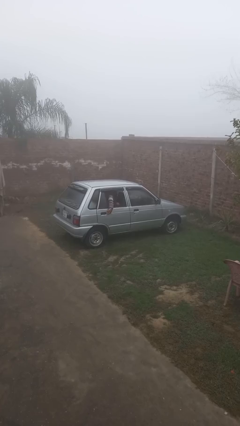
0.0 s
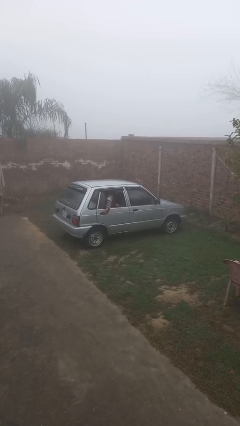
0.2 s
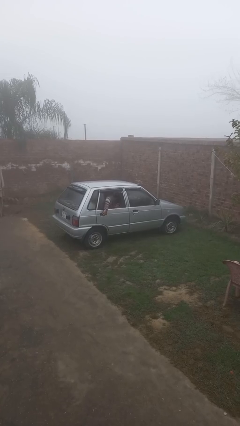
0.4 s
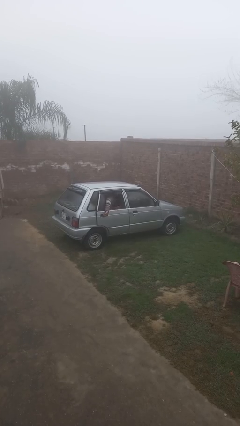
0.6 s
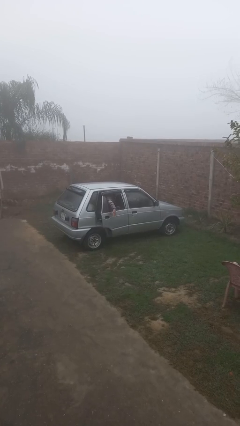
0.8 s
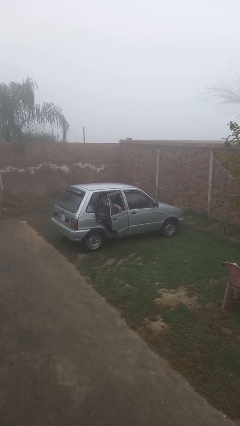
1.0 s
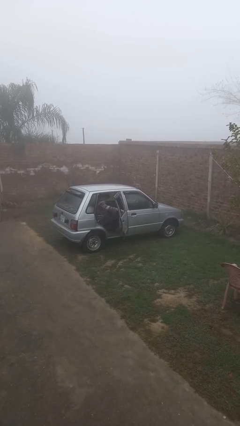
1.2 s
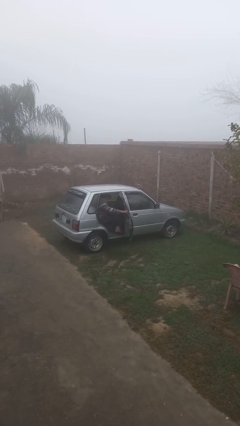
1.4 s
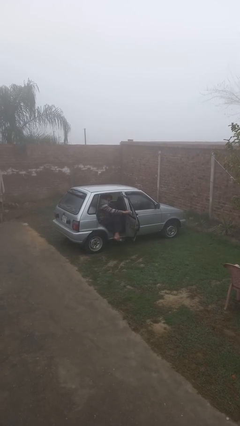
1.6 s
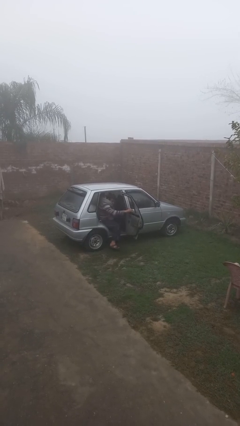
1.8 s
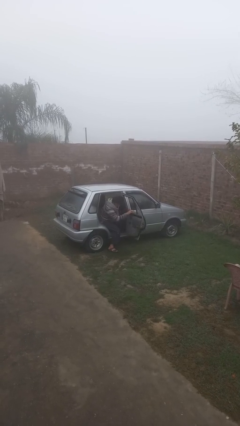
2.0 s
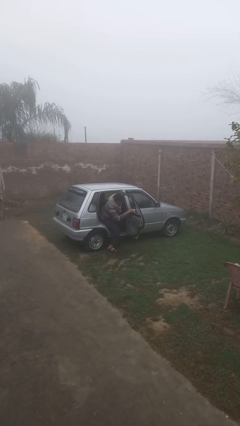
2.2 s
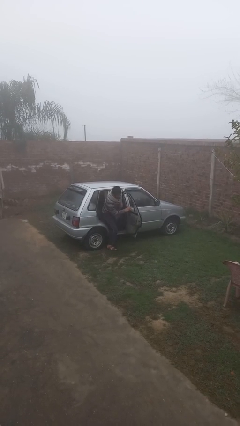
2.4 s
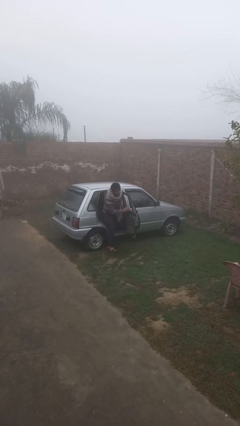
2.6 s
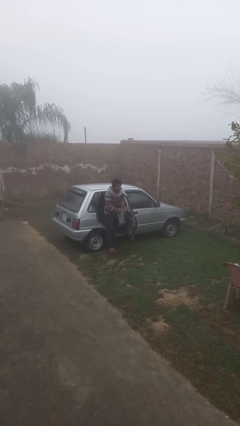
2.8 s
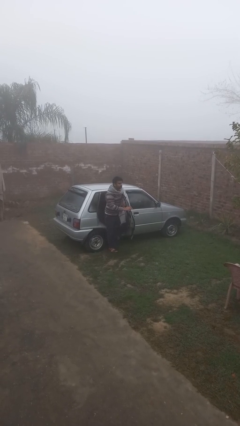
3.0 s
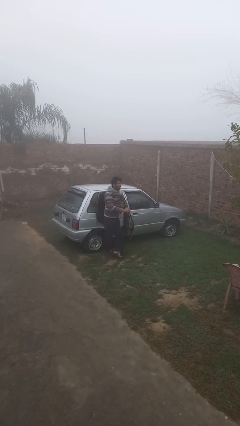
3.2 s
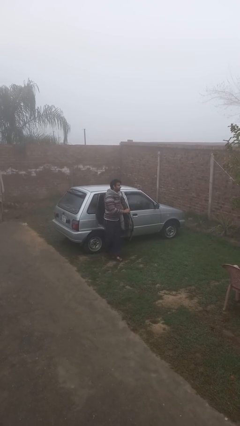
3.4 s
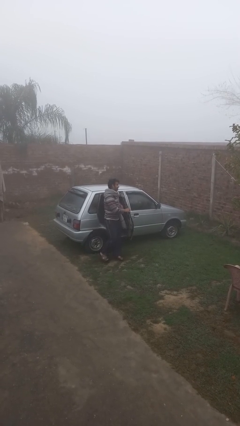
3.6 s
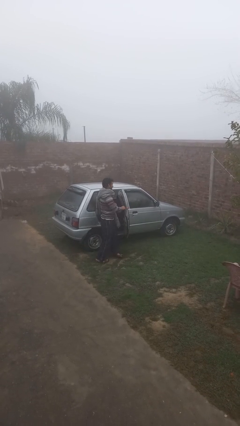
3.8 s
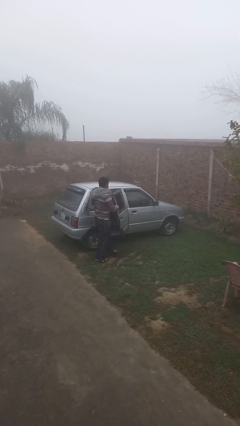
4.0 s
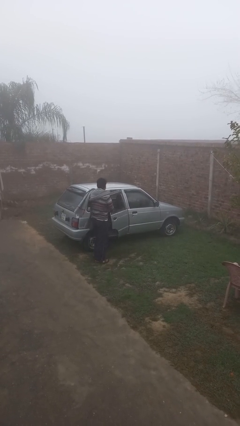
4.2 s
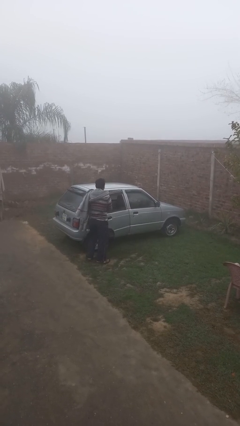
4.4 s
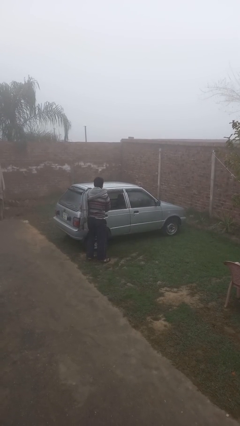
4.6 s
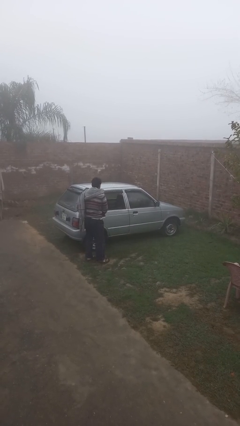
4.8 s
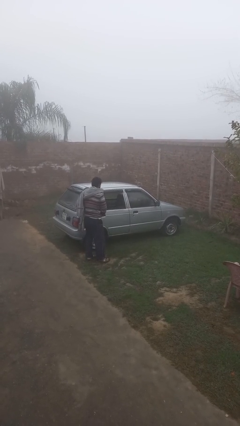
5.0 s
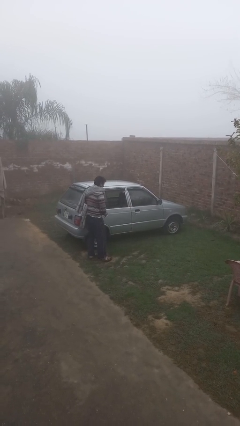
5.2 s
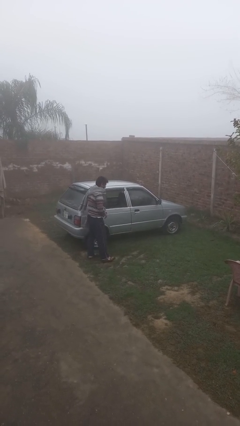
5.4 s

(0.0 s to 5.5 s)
car drops off person

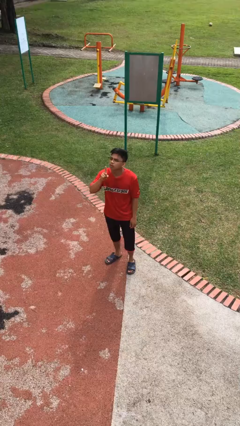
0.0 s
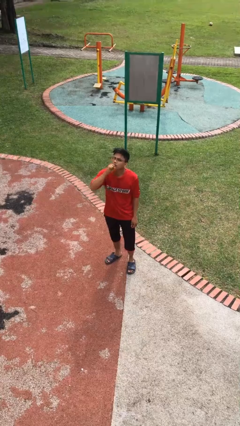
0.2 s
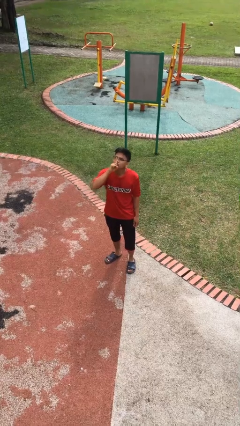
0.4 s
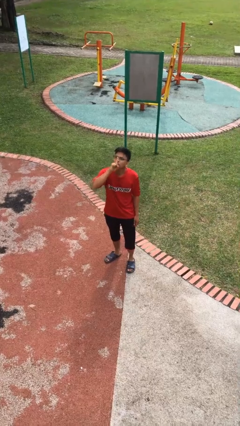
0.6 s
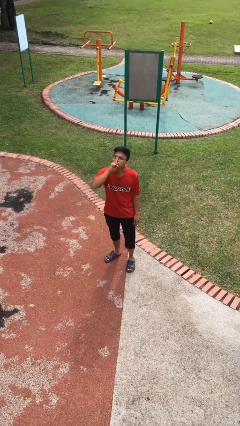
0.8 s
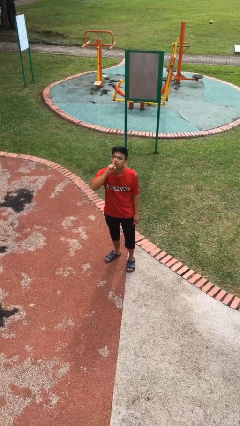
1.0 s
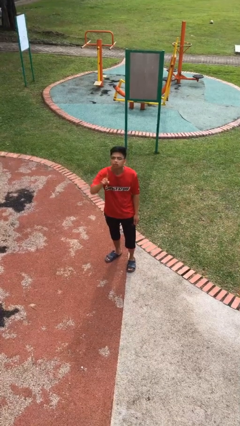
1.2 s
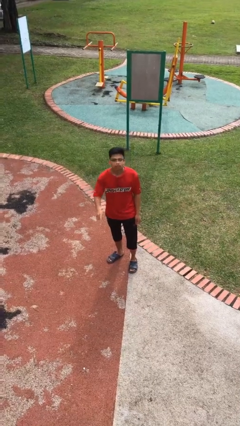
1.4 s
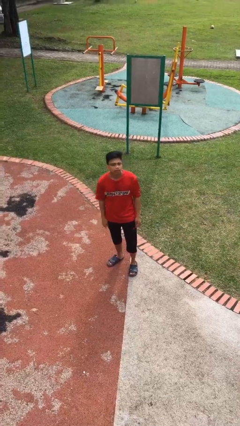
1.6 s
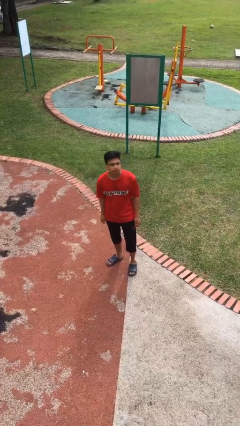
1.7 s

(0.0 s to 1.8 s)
person gestures be quiet

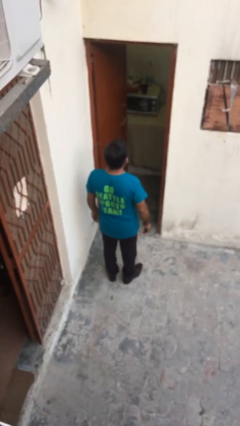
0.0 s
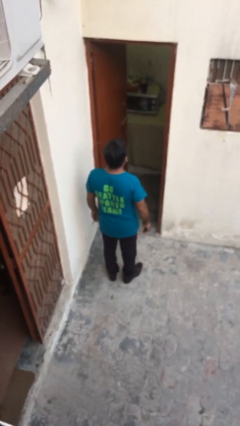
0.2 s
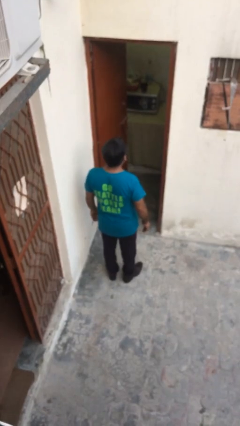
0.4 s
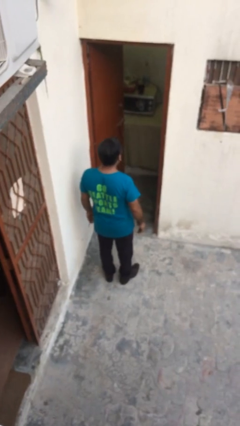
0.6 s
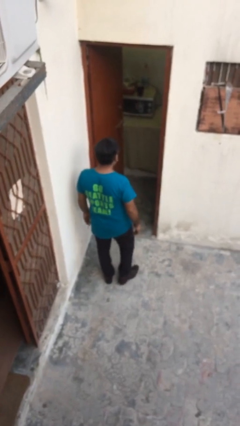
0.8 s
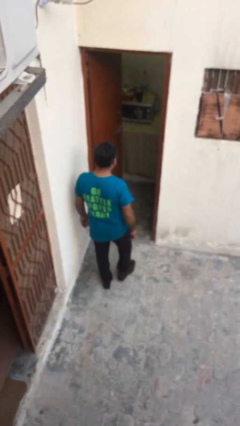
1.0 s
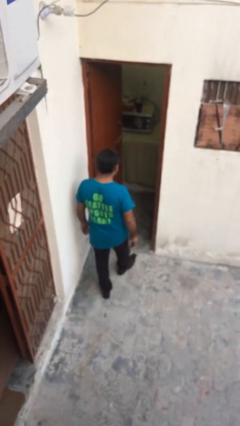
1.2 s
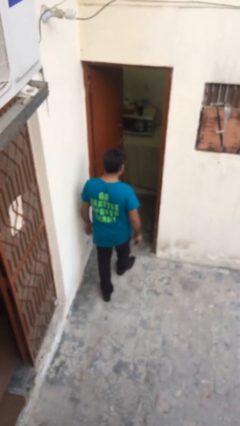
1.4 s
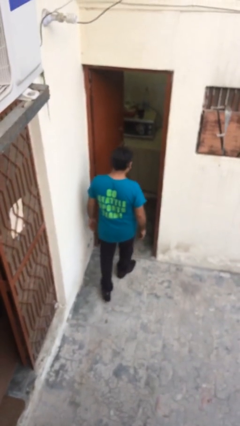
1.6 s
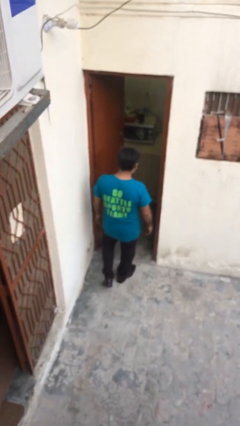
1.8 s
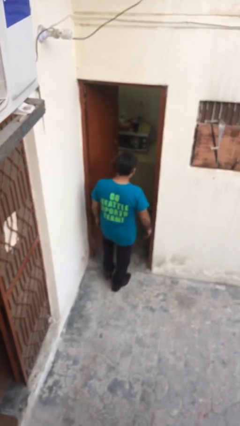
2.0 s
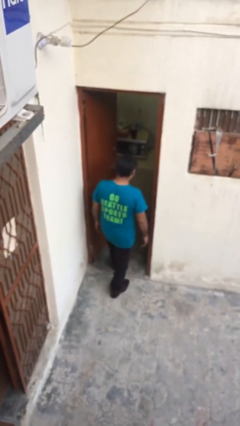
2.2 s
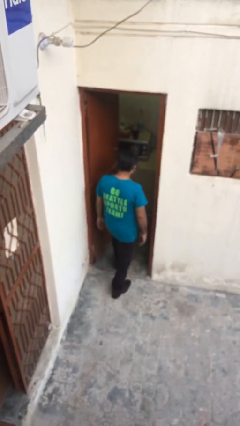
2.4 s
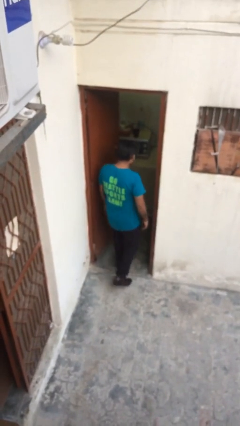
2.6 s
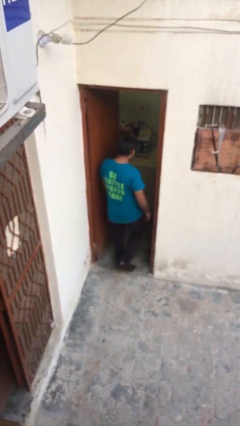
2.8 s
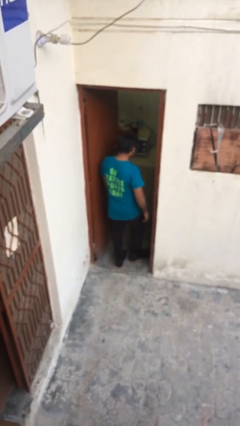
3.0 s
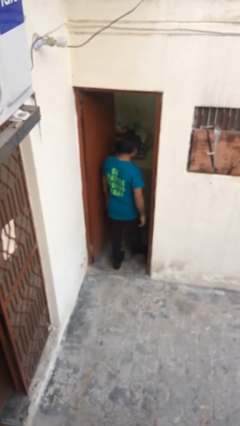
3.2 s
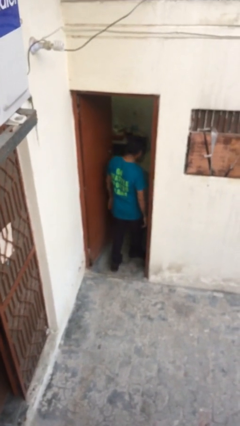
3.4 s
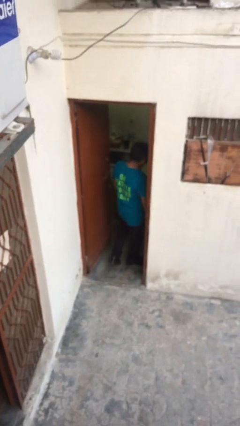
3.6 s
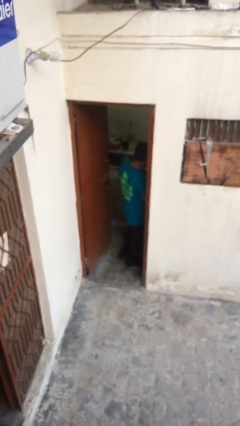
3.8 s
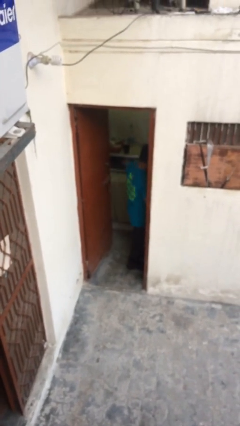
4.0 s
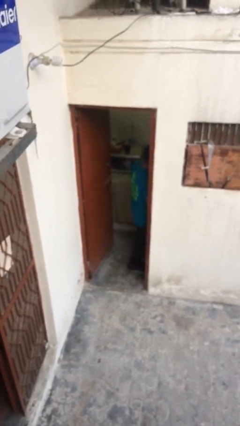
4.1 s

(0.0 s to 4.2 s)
person exits scene through structure

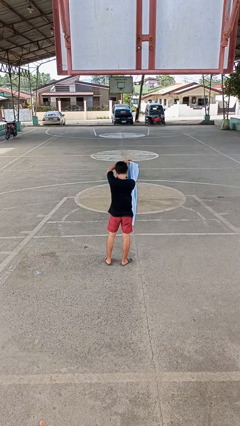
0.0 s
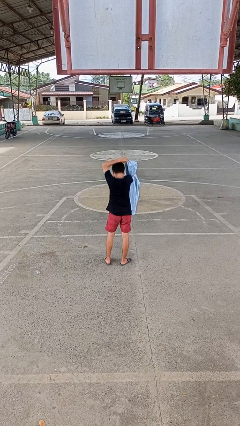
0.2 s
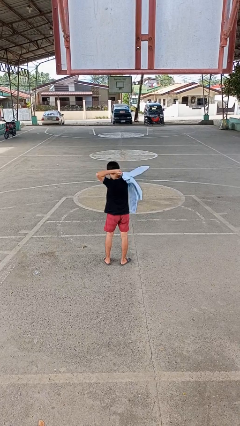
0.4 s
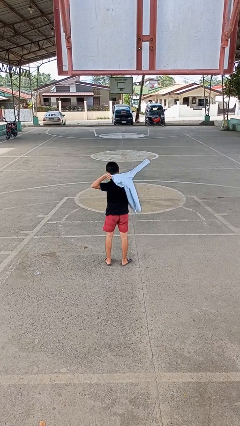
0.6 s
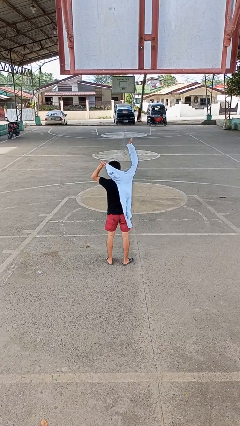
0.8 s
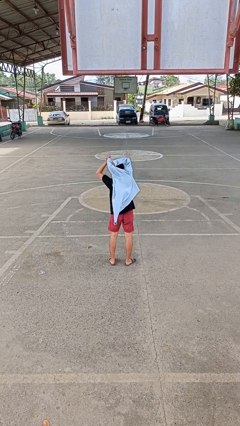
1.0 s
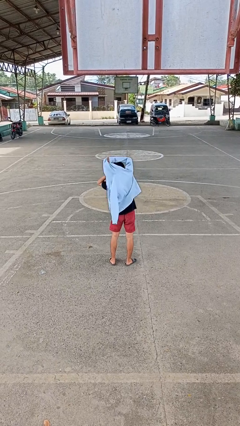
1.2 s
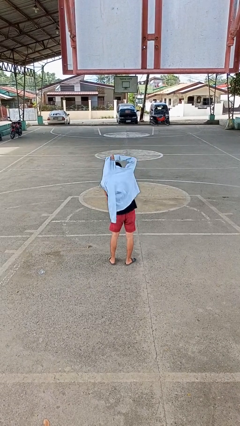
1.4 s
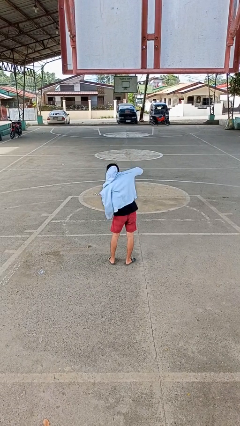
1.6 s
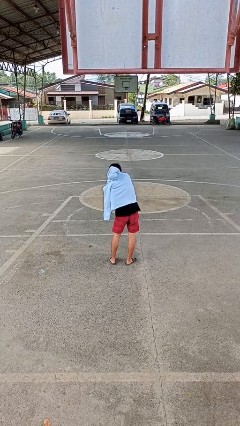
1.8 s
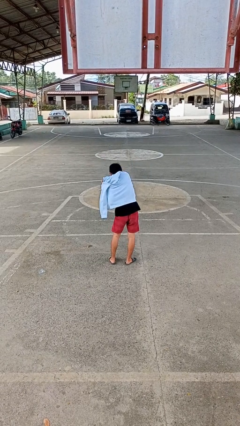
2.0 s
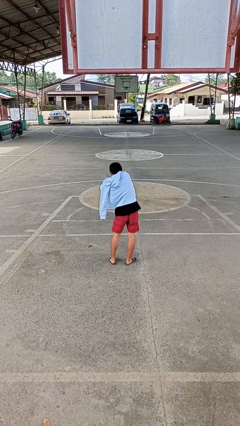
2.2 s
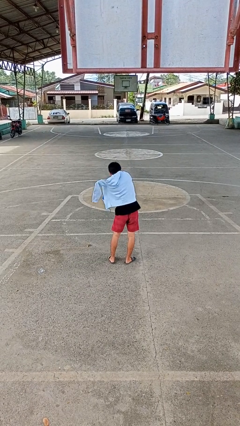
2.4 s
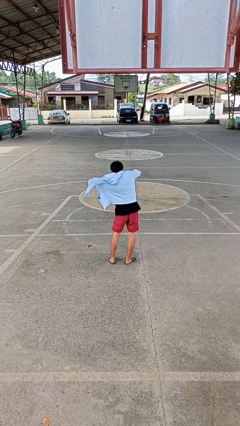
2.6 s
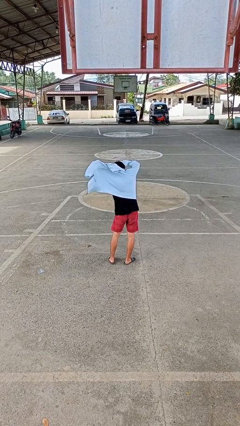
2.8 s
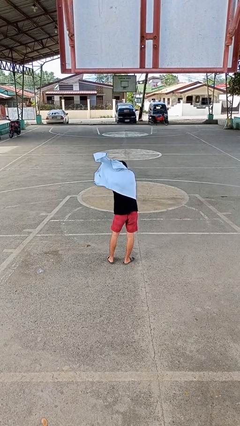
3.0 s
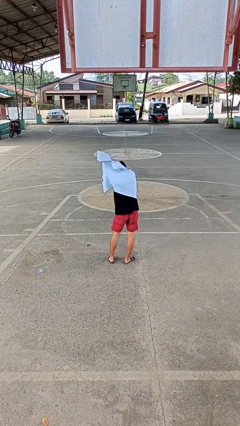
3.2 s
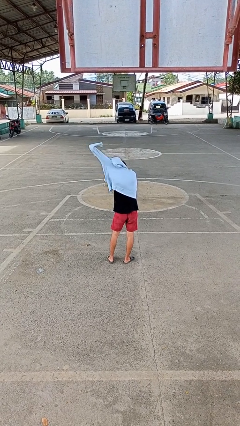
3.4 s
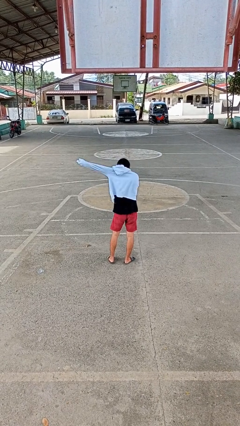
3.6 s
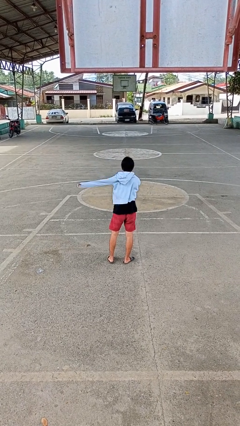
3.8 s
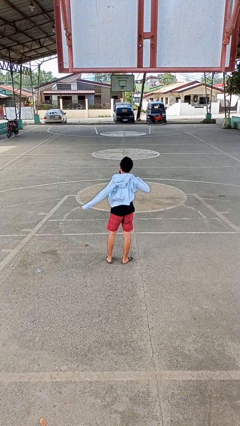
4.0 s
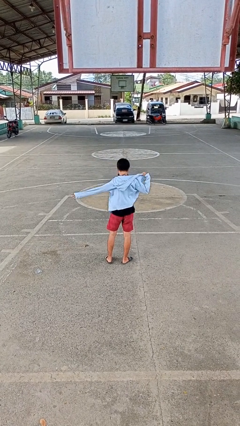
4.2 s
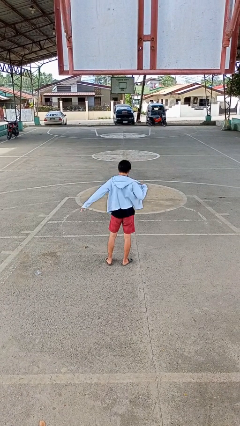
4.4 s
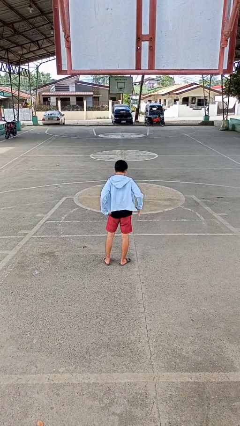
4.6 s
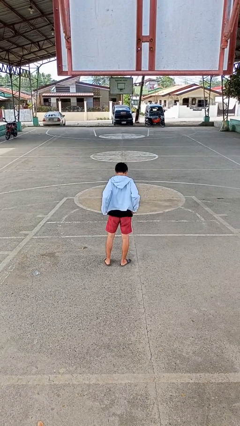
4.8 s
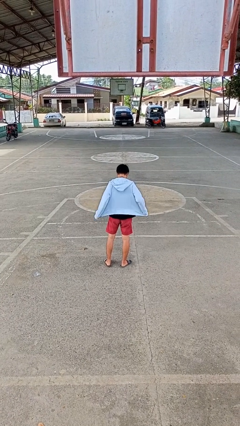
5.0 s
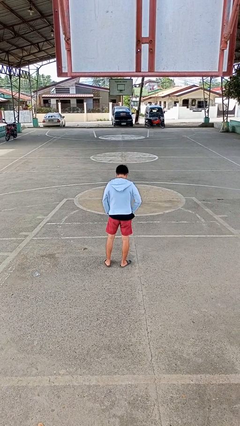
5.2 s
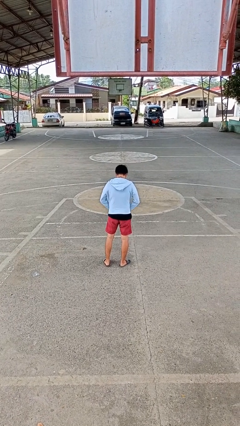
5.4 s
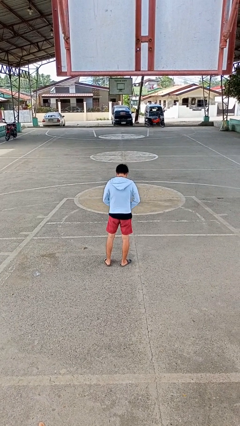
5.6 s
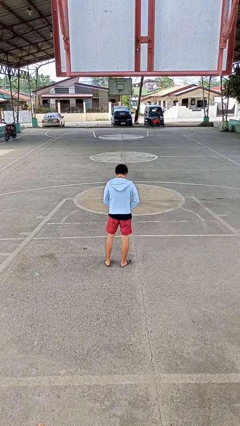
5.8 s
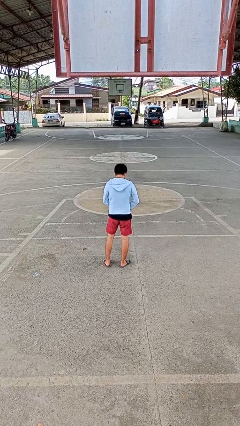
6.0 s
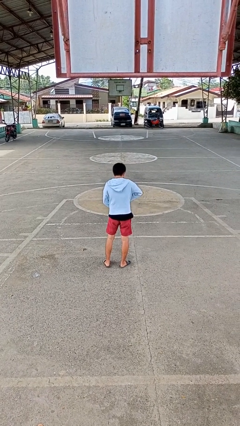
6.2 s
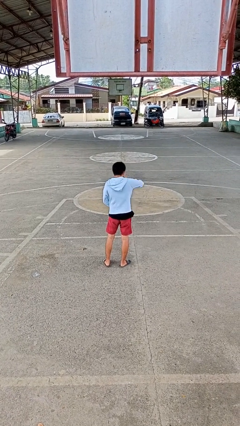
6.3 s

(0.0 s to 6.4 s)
person puts on jacket
